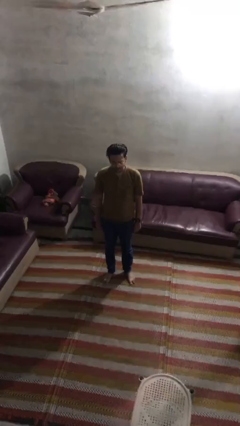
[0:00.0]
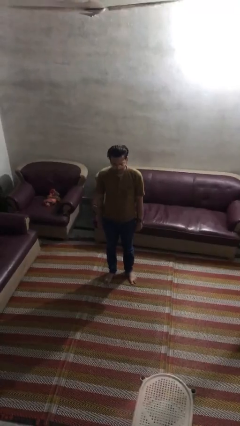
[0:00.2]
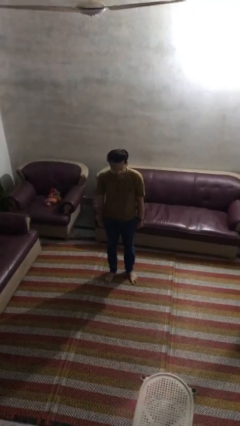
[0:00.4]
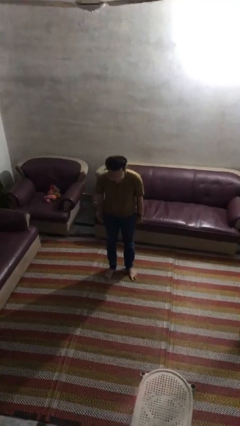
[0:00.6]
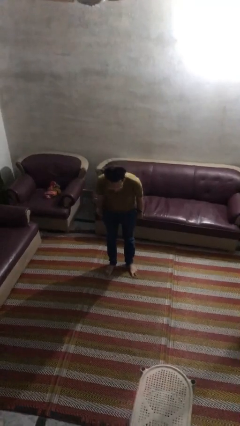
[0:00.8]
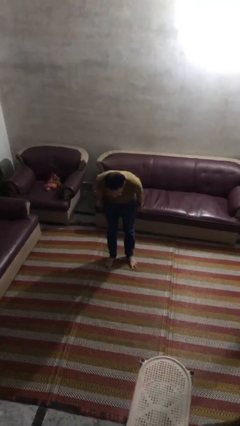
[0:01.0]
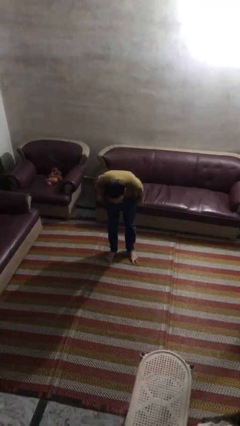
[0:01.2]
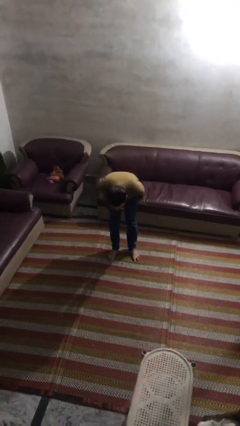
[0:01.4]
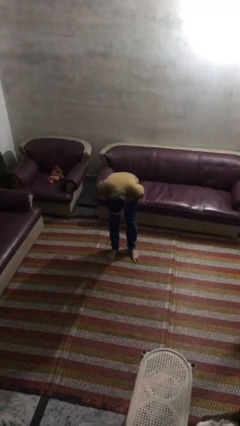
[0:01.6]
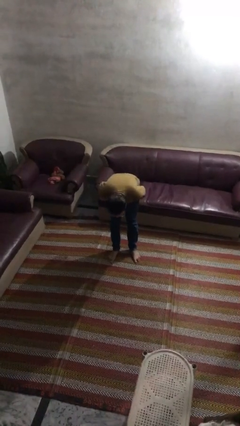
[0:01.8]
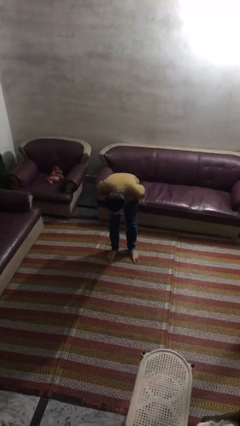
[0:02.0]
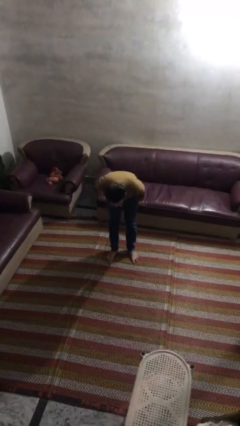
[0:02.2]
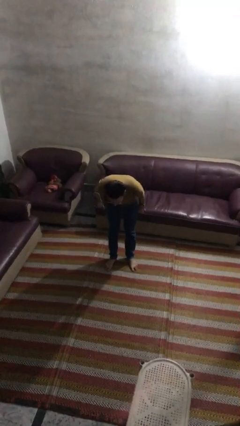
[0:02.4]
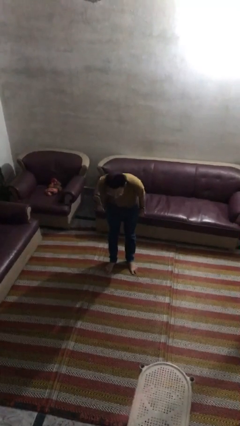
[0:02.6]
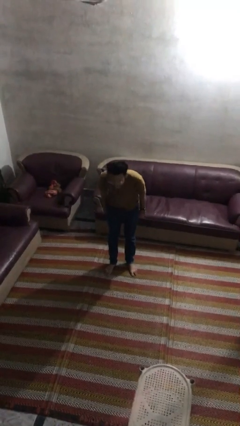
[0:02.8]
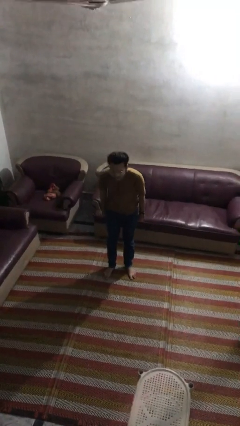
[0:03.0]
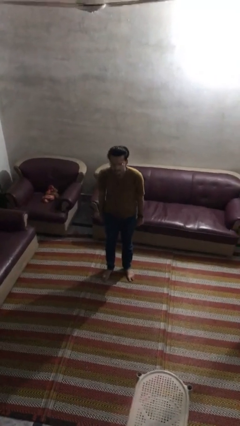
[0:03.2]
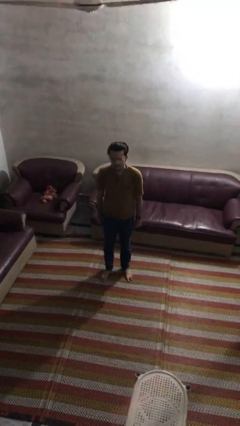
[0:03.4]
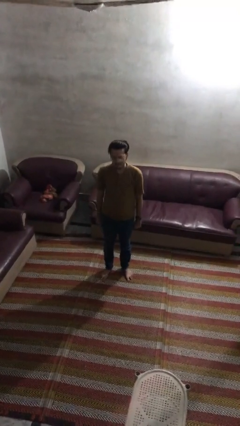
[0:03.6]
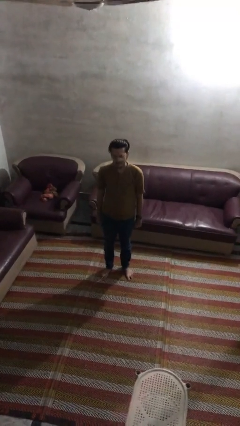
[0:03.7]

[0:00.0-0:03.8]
person bows

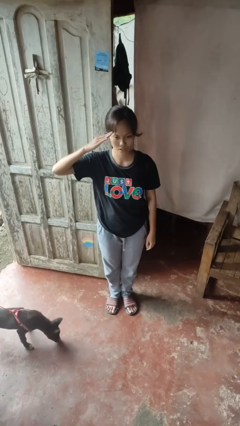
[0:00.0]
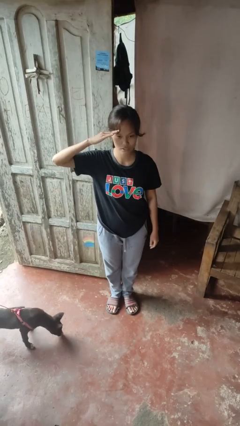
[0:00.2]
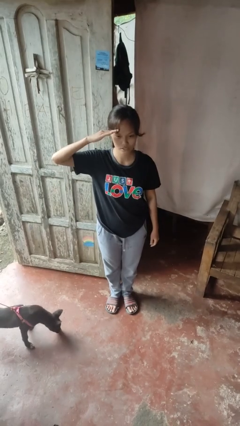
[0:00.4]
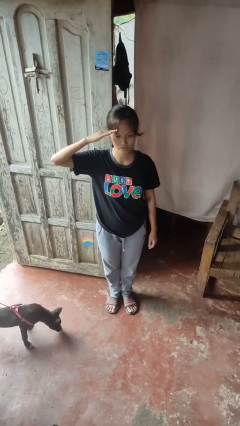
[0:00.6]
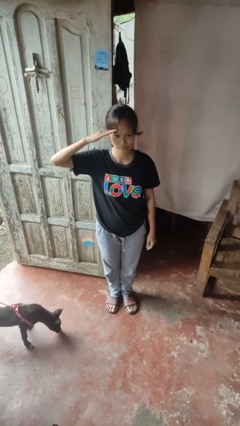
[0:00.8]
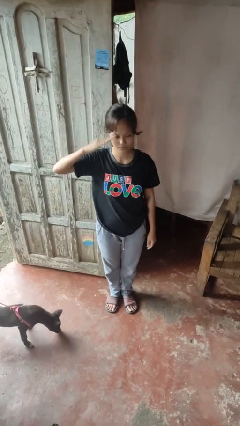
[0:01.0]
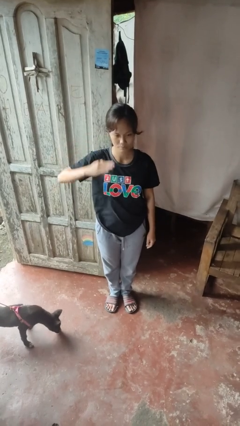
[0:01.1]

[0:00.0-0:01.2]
person salutes

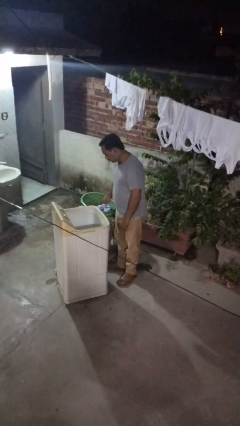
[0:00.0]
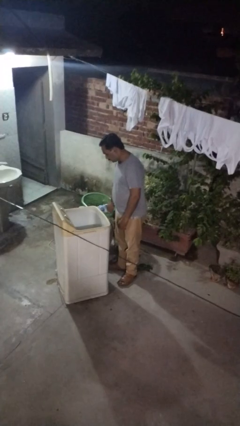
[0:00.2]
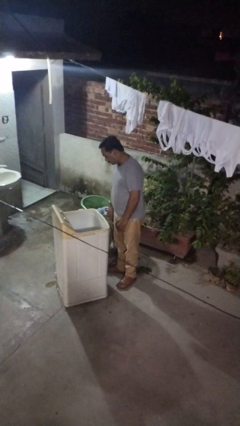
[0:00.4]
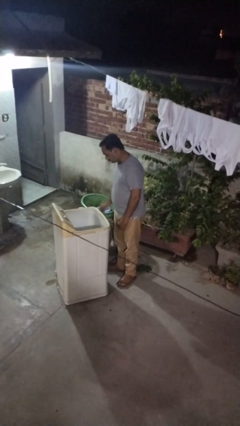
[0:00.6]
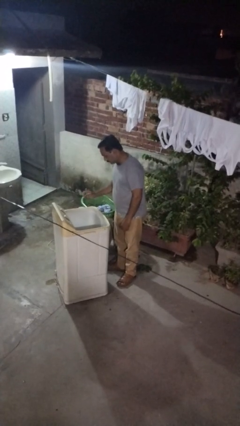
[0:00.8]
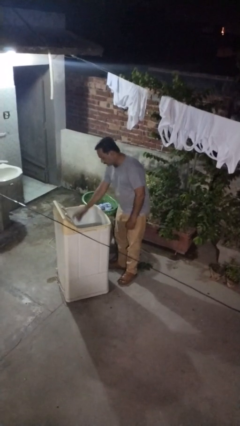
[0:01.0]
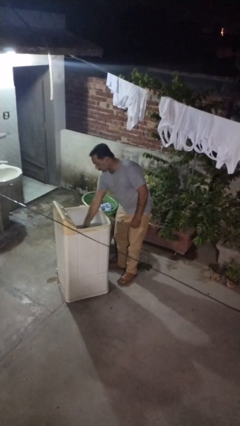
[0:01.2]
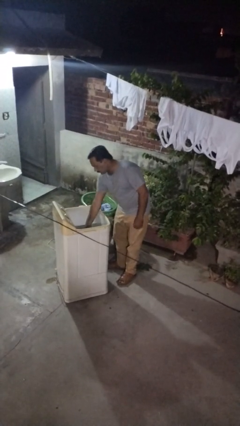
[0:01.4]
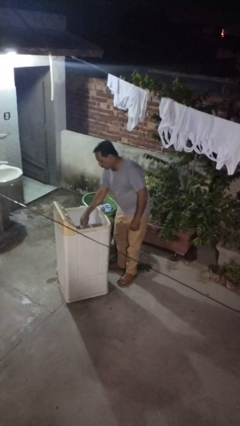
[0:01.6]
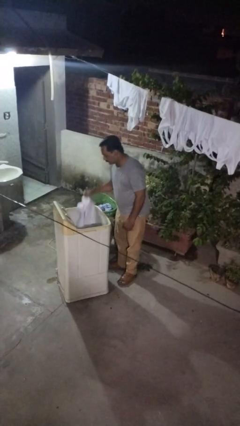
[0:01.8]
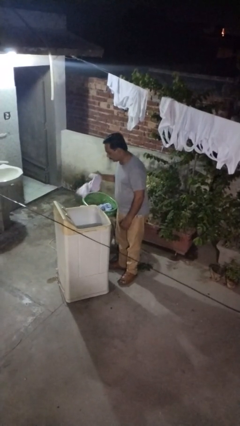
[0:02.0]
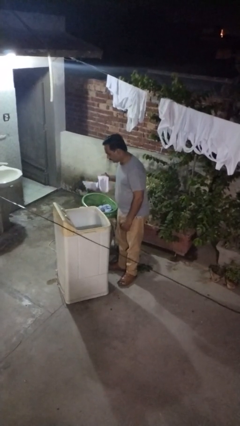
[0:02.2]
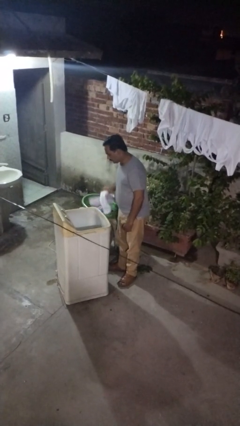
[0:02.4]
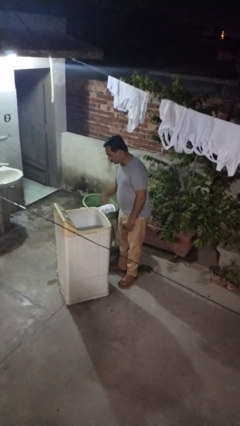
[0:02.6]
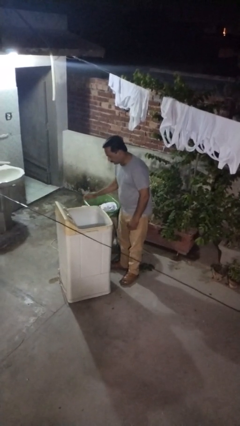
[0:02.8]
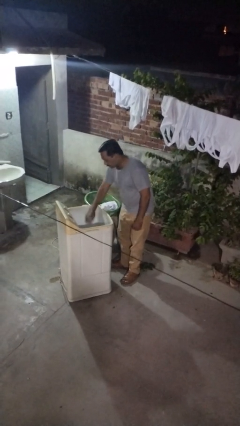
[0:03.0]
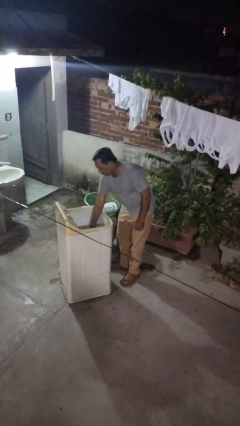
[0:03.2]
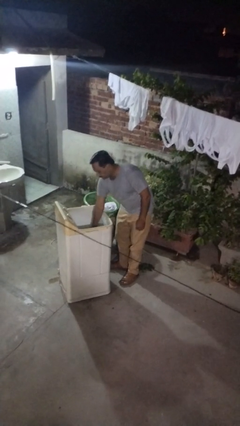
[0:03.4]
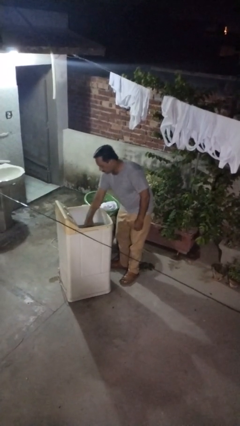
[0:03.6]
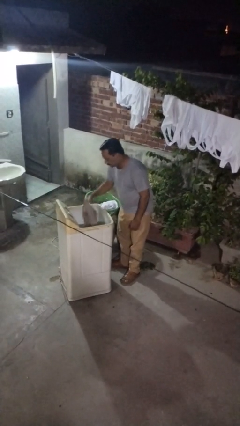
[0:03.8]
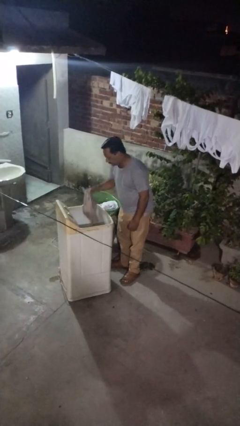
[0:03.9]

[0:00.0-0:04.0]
person loads clotheswasher

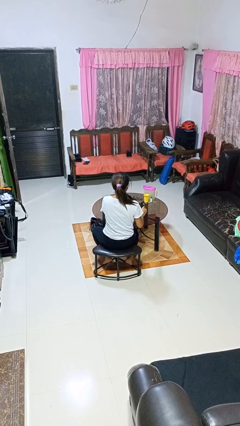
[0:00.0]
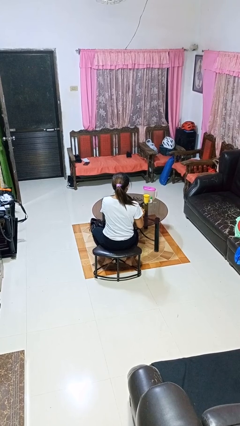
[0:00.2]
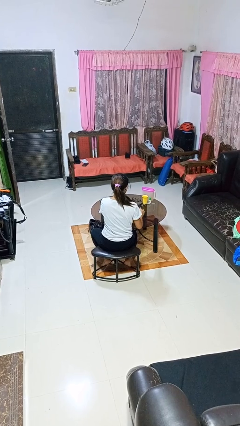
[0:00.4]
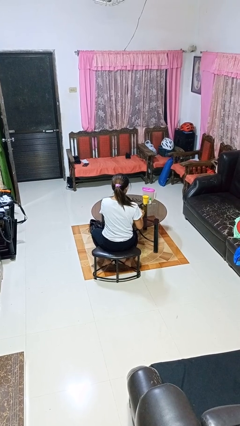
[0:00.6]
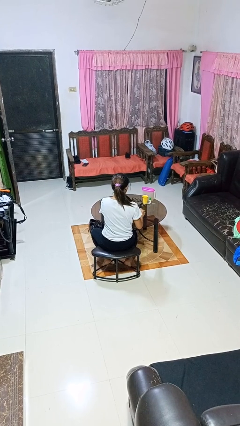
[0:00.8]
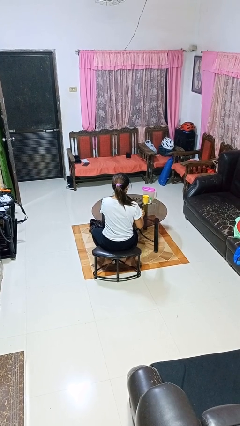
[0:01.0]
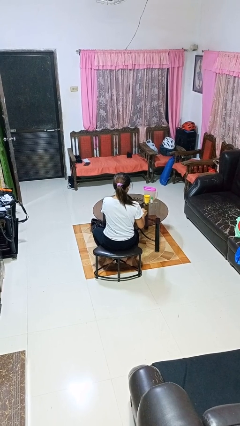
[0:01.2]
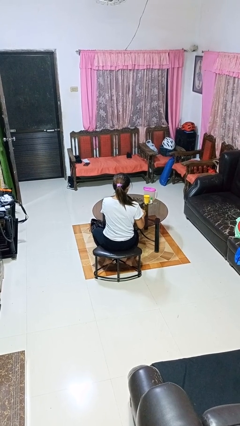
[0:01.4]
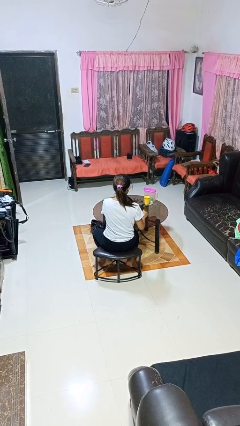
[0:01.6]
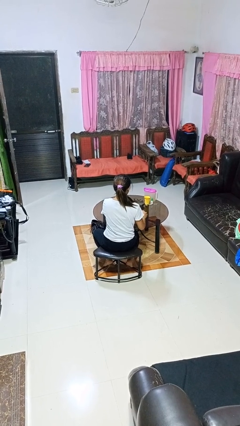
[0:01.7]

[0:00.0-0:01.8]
person stirs mug

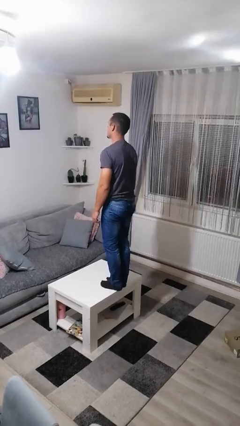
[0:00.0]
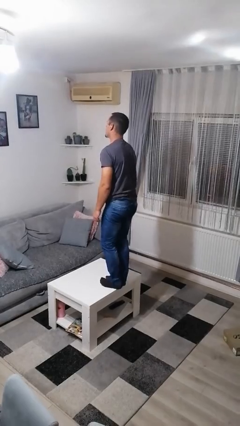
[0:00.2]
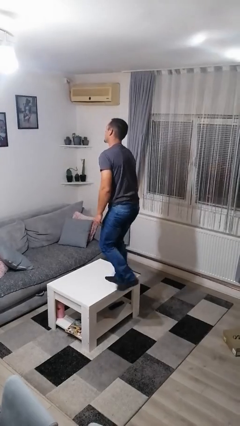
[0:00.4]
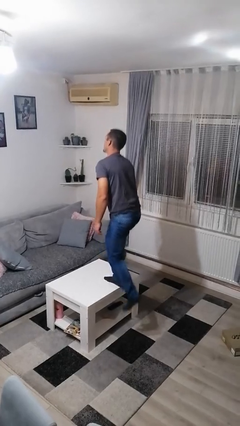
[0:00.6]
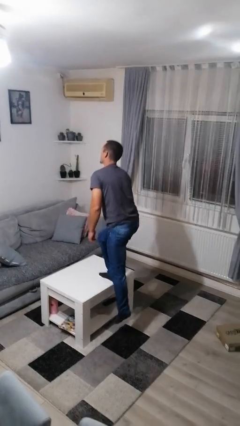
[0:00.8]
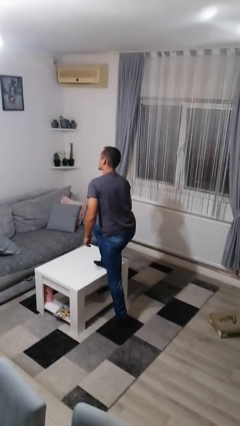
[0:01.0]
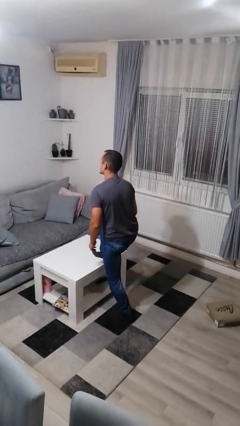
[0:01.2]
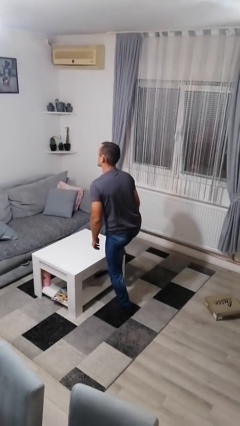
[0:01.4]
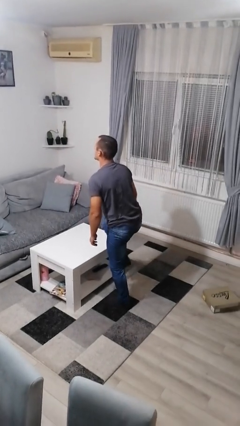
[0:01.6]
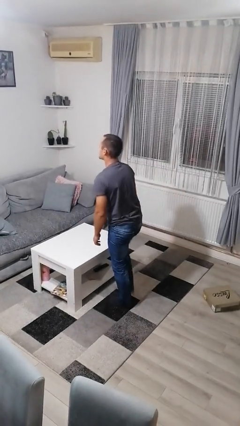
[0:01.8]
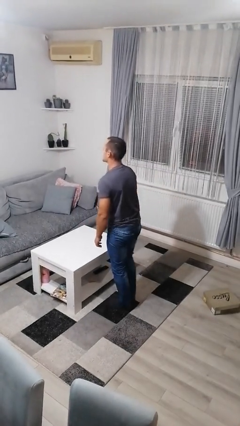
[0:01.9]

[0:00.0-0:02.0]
person climbs off table

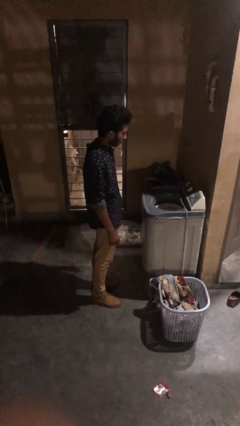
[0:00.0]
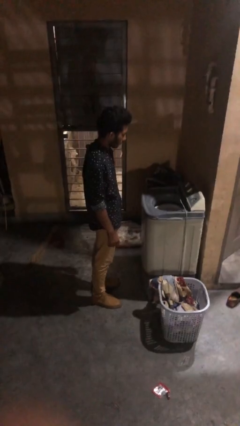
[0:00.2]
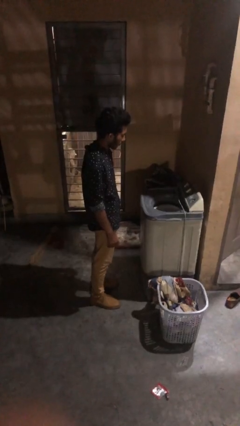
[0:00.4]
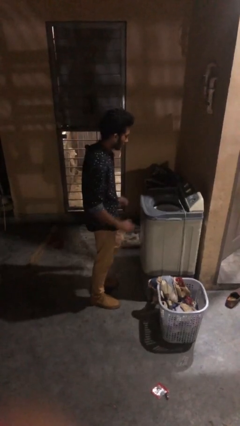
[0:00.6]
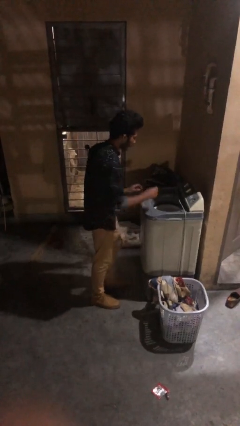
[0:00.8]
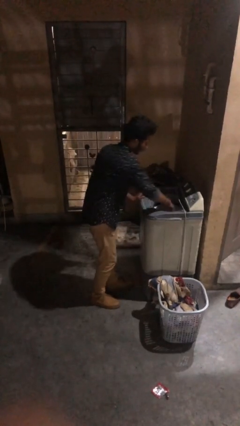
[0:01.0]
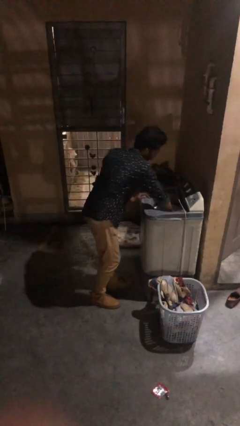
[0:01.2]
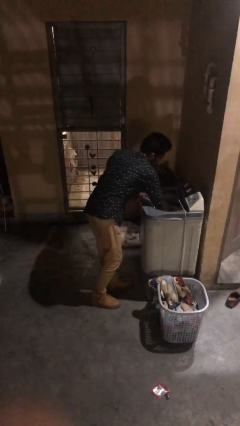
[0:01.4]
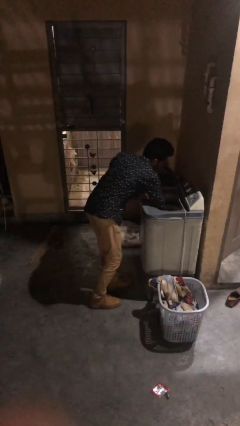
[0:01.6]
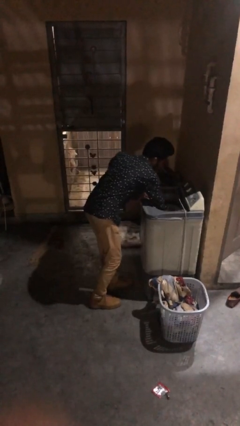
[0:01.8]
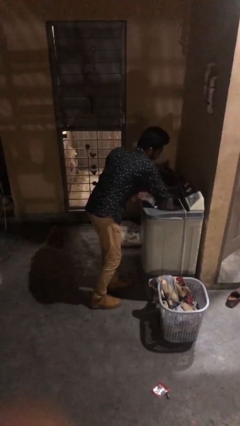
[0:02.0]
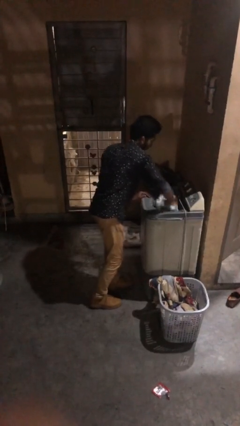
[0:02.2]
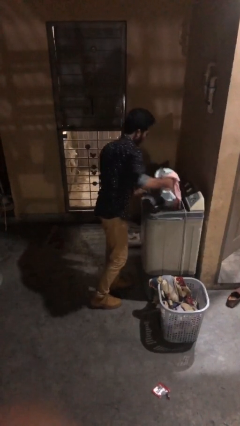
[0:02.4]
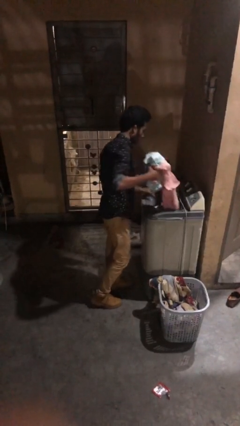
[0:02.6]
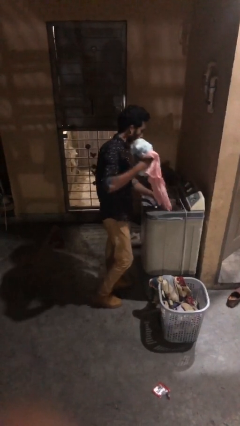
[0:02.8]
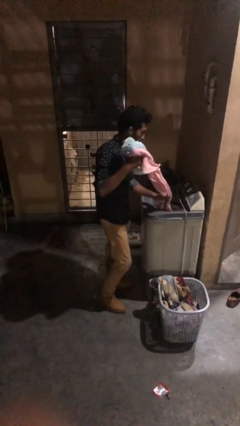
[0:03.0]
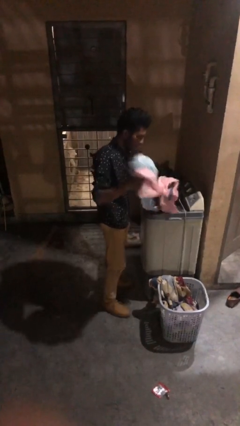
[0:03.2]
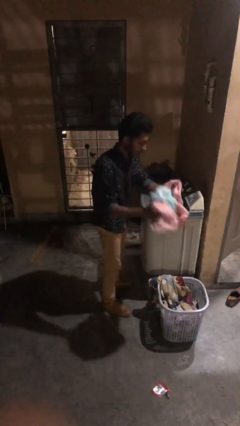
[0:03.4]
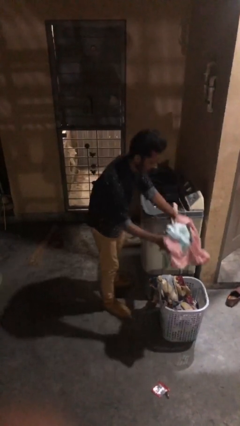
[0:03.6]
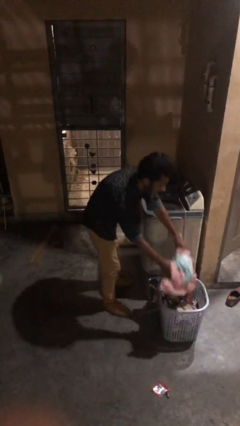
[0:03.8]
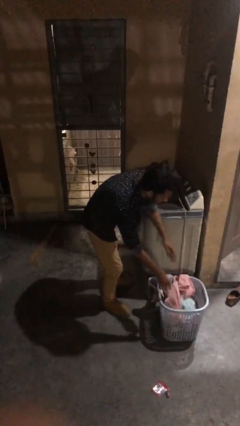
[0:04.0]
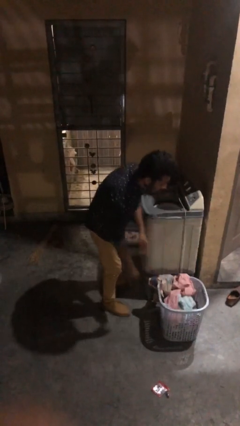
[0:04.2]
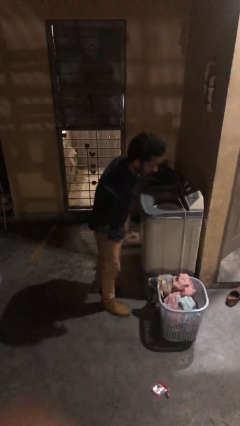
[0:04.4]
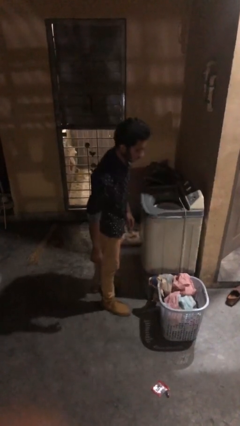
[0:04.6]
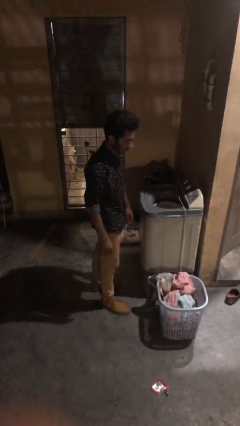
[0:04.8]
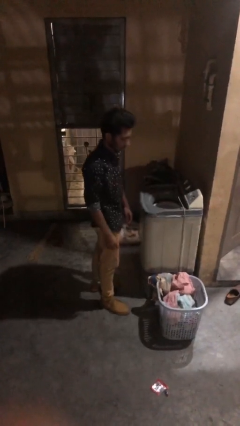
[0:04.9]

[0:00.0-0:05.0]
person unloads clotheswasher
